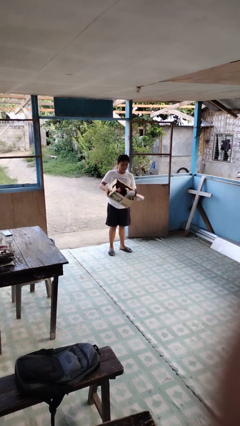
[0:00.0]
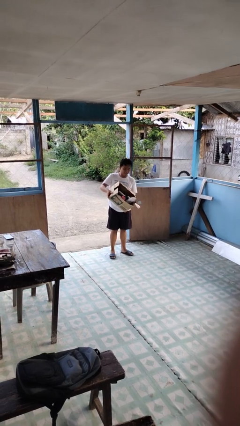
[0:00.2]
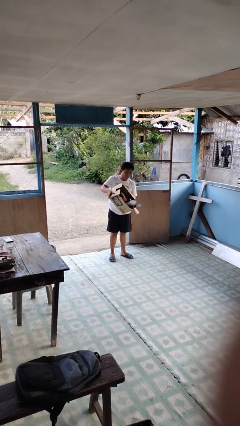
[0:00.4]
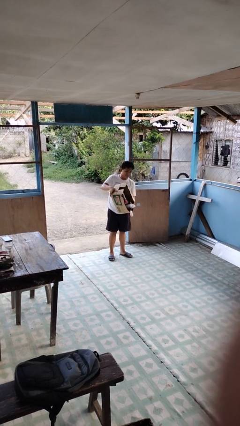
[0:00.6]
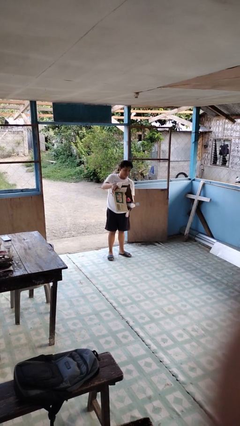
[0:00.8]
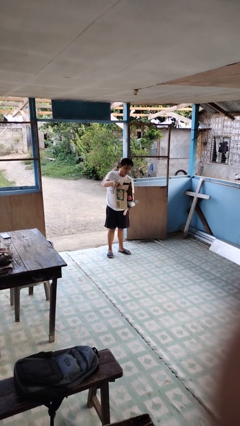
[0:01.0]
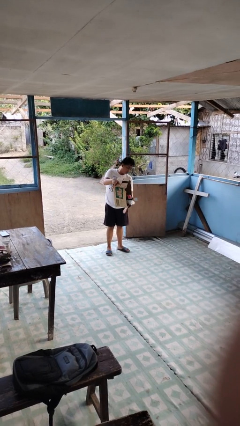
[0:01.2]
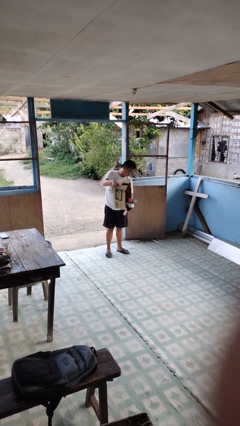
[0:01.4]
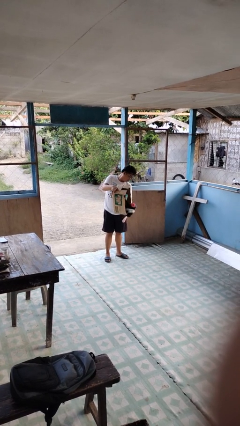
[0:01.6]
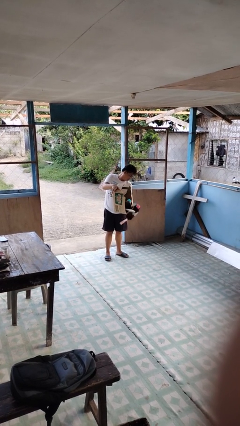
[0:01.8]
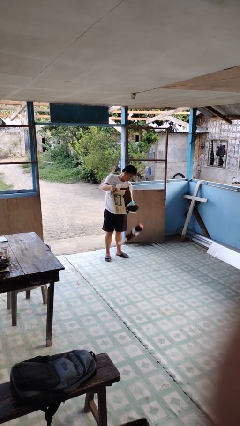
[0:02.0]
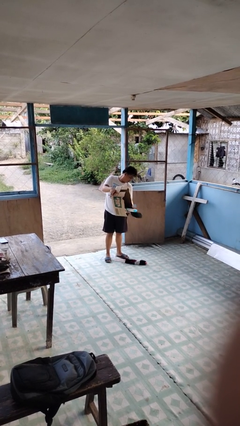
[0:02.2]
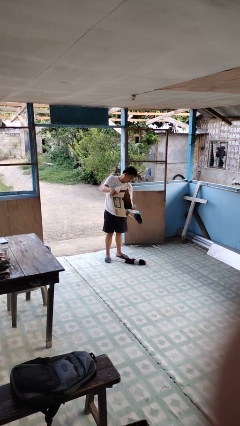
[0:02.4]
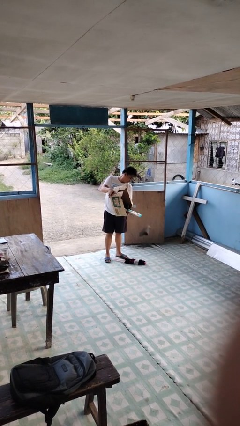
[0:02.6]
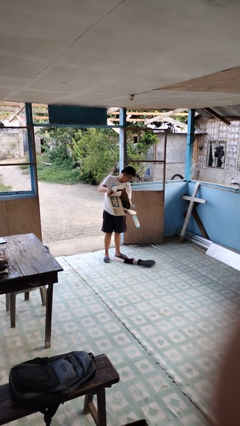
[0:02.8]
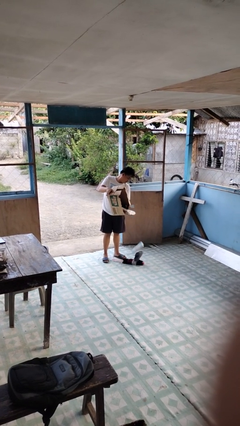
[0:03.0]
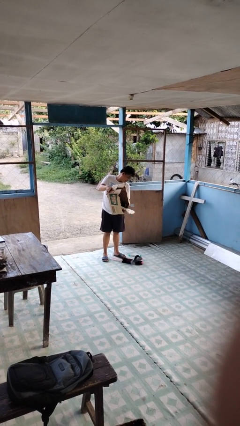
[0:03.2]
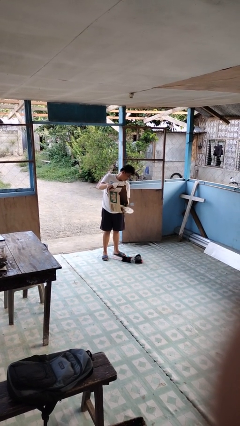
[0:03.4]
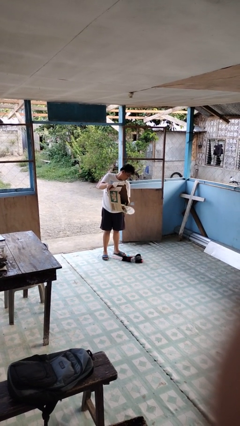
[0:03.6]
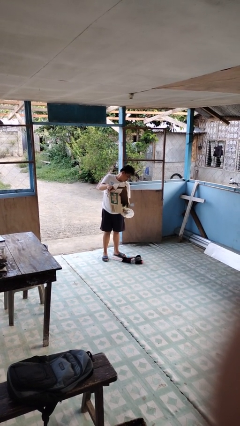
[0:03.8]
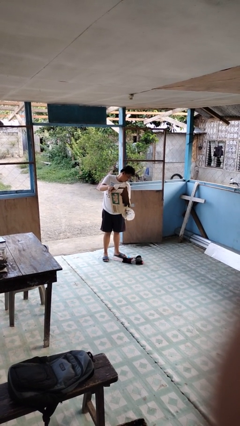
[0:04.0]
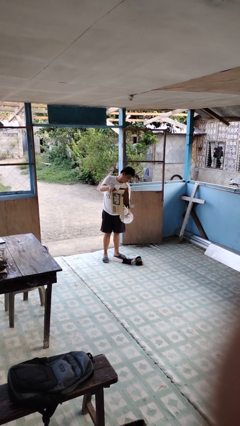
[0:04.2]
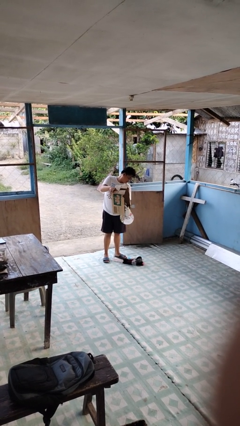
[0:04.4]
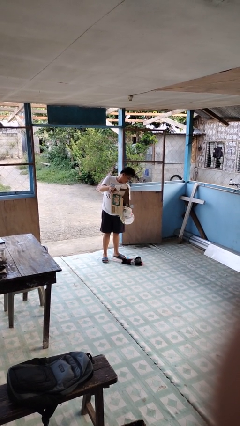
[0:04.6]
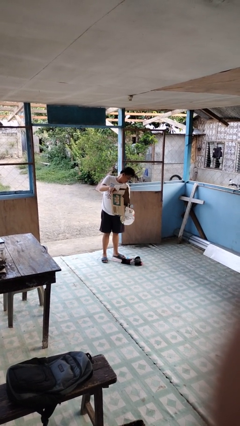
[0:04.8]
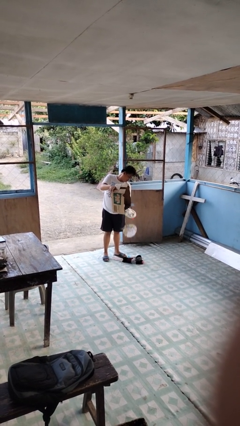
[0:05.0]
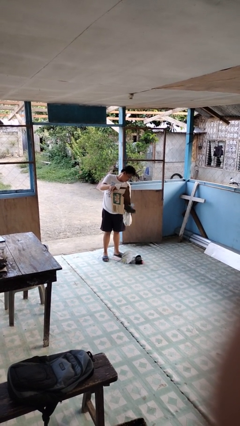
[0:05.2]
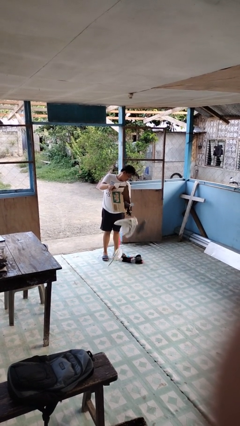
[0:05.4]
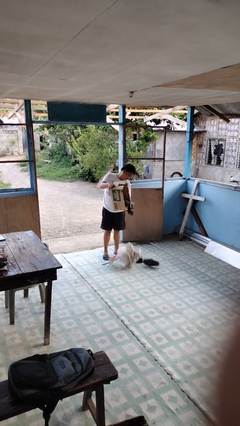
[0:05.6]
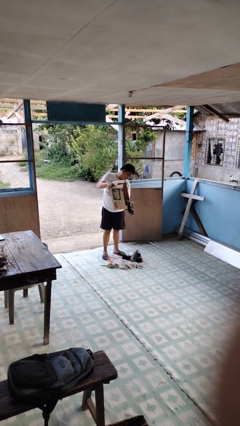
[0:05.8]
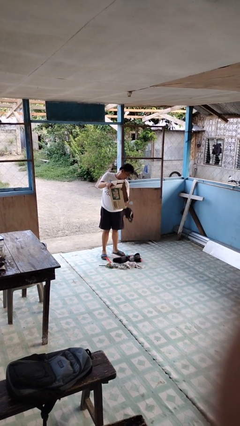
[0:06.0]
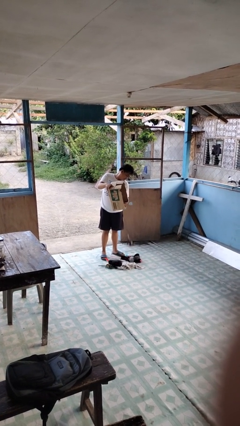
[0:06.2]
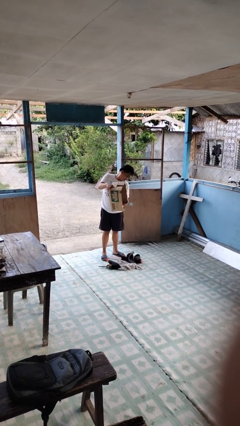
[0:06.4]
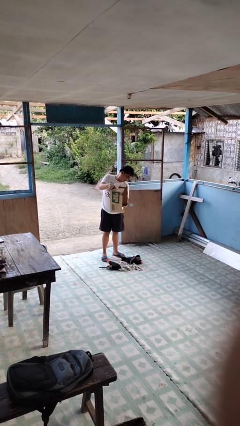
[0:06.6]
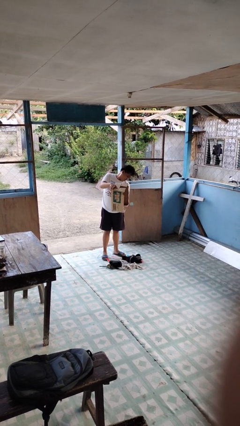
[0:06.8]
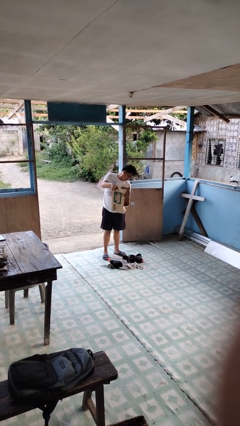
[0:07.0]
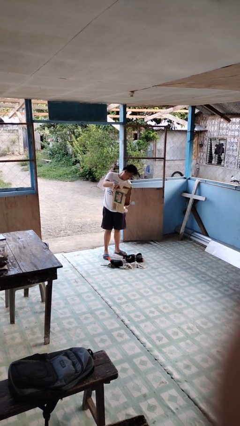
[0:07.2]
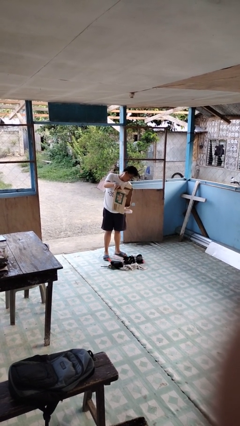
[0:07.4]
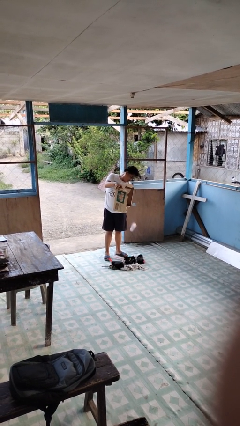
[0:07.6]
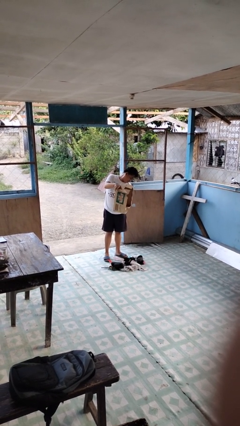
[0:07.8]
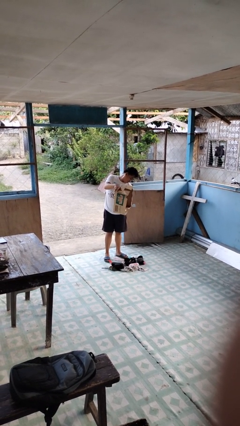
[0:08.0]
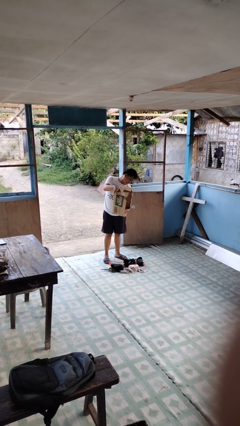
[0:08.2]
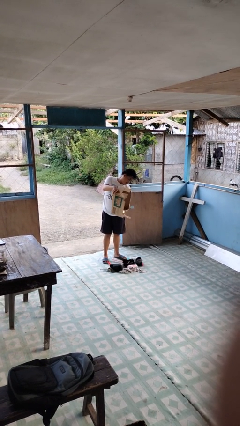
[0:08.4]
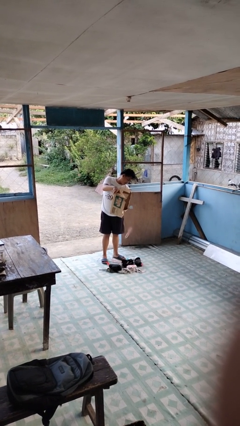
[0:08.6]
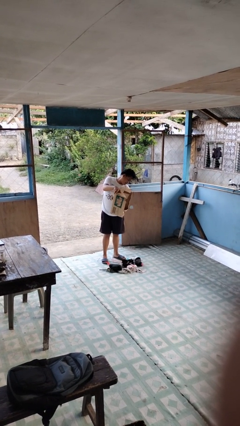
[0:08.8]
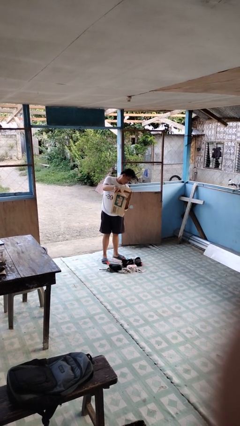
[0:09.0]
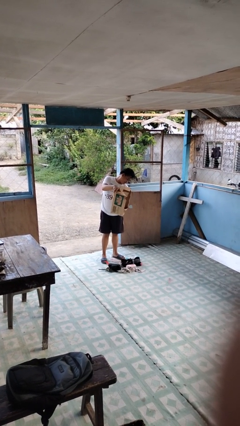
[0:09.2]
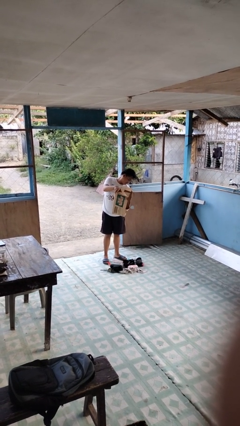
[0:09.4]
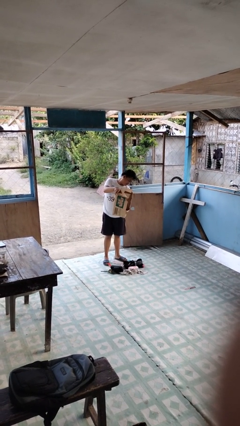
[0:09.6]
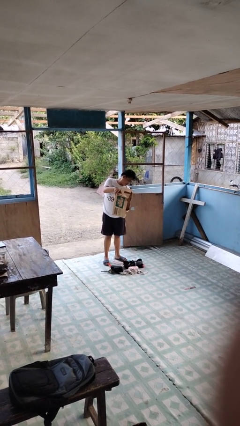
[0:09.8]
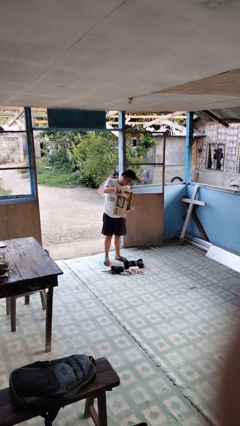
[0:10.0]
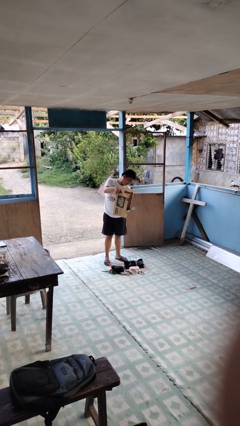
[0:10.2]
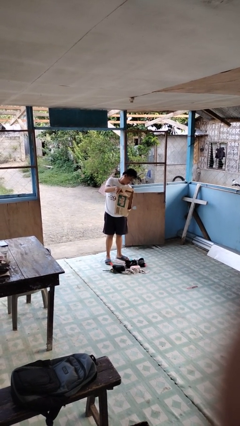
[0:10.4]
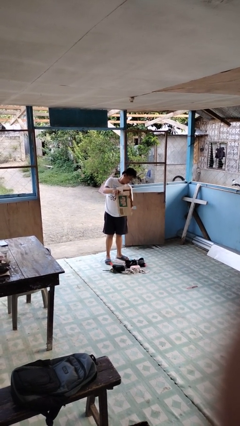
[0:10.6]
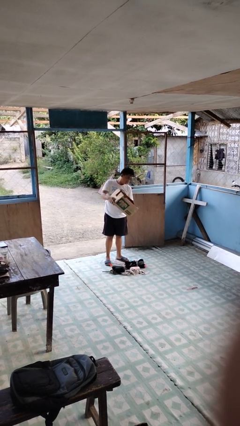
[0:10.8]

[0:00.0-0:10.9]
person unloads box onto floor

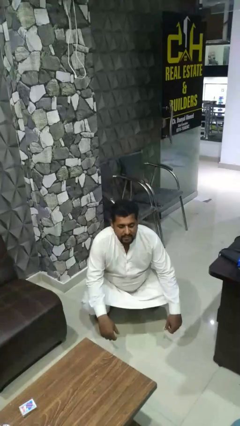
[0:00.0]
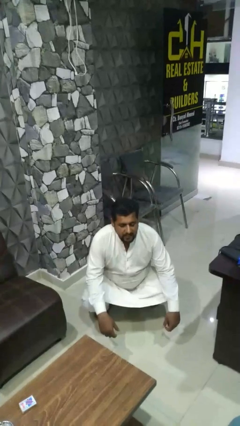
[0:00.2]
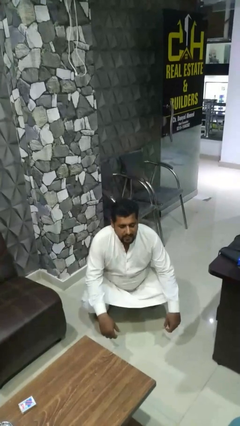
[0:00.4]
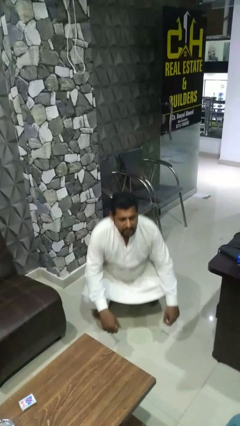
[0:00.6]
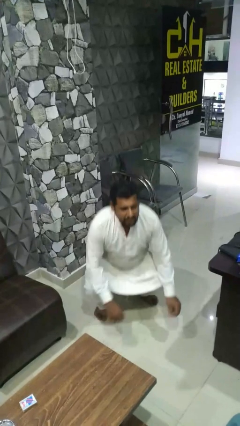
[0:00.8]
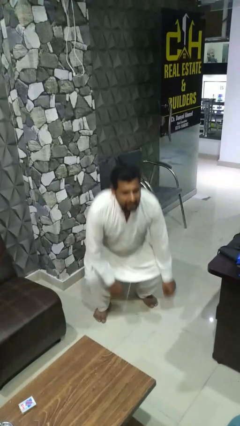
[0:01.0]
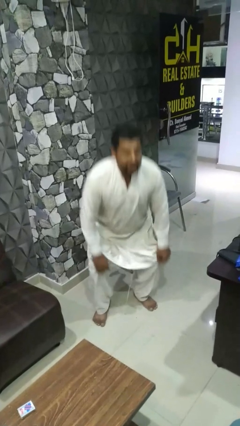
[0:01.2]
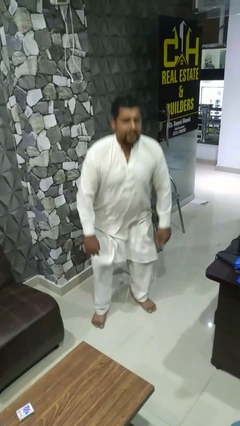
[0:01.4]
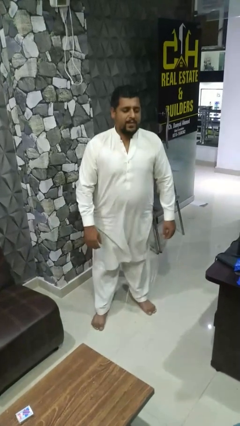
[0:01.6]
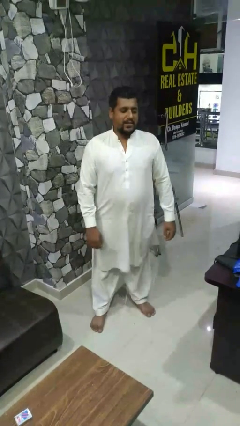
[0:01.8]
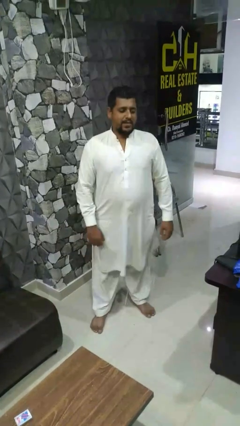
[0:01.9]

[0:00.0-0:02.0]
person stands up

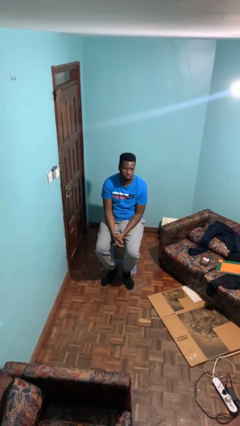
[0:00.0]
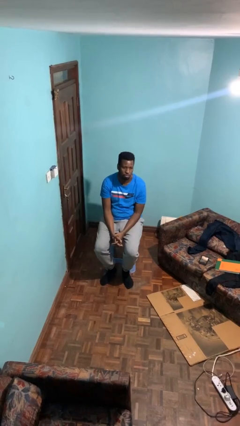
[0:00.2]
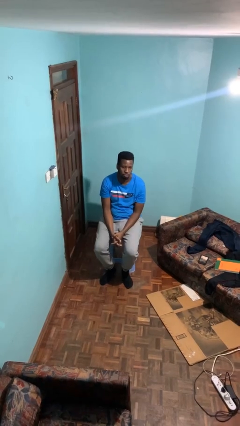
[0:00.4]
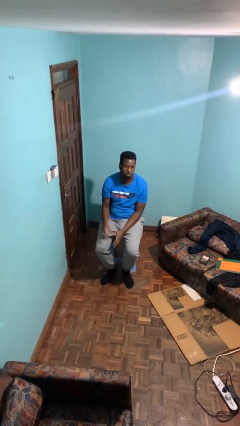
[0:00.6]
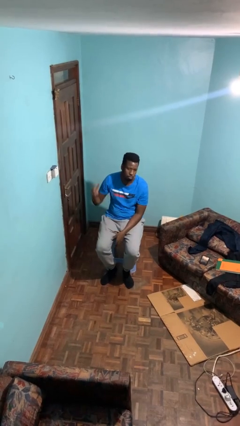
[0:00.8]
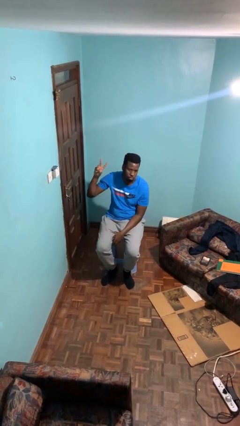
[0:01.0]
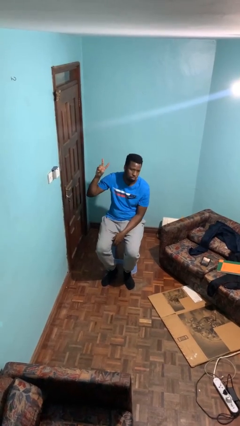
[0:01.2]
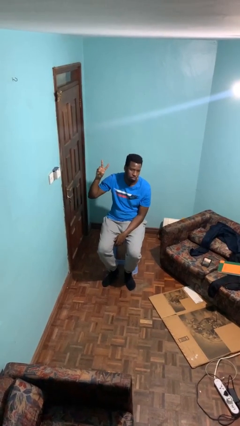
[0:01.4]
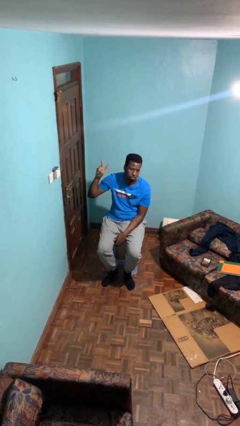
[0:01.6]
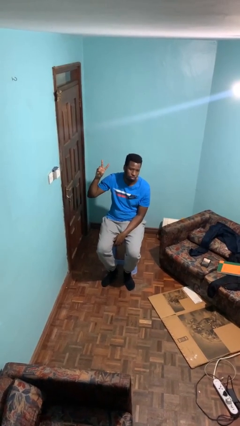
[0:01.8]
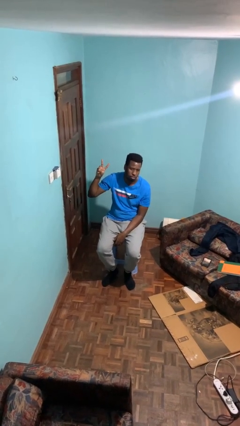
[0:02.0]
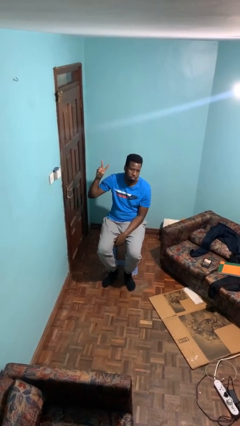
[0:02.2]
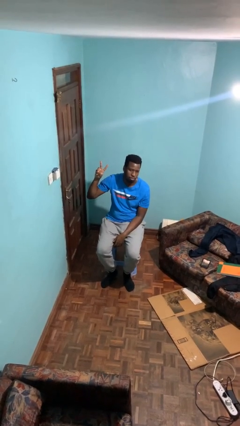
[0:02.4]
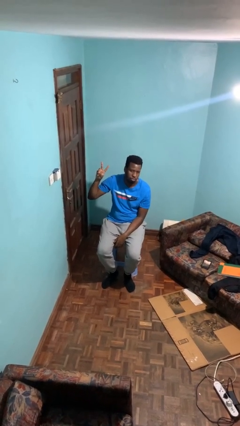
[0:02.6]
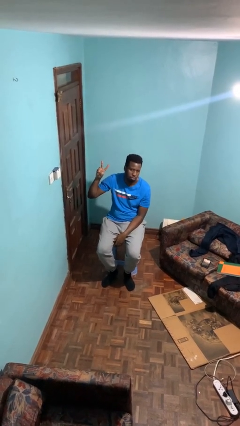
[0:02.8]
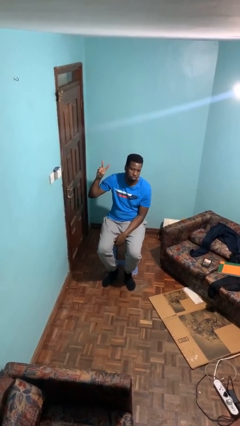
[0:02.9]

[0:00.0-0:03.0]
person gestures peace

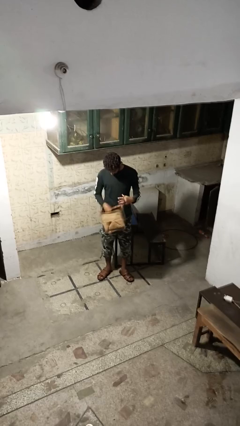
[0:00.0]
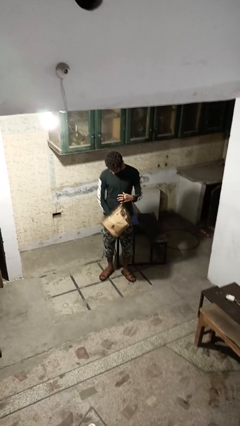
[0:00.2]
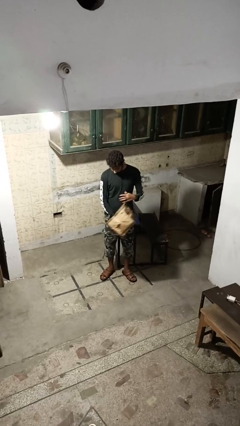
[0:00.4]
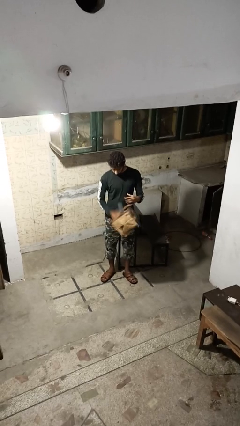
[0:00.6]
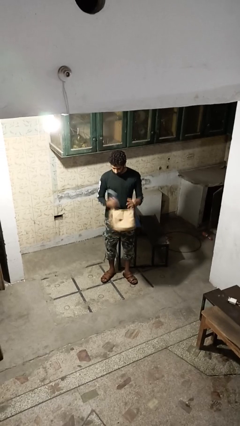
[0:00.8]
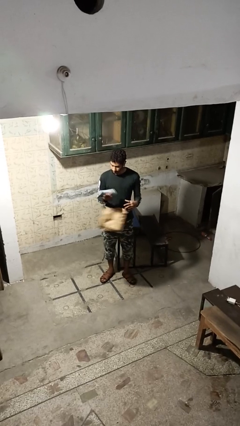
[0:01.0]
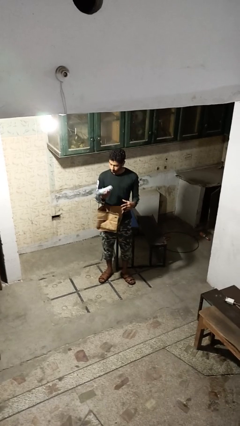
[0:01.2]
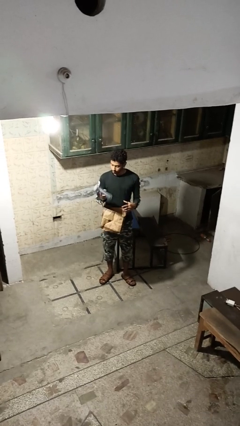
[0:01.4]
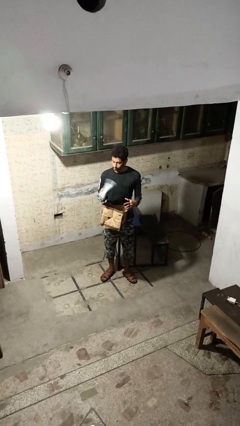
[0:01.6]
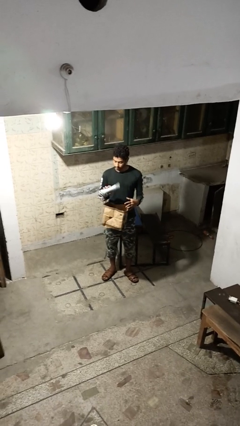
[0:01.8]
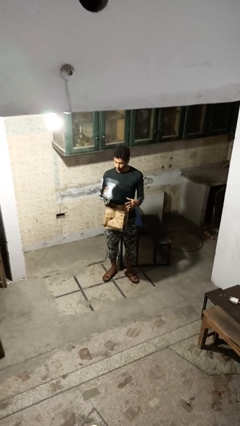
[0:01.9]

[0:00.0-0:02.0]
person takes object from purse
